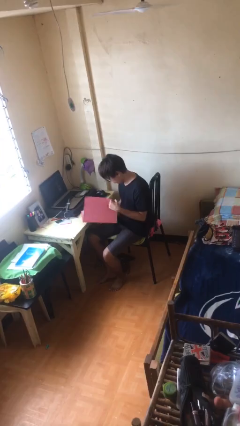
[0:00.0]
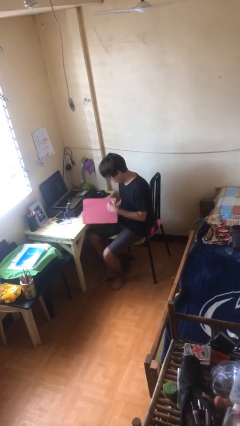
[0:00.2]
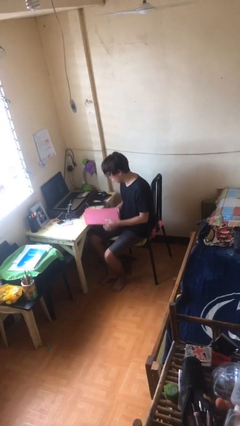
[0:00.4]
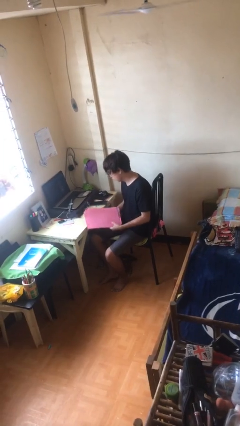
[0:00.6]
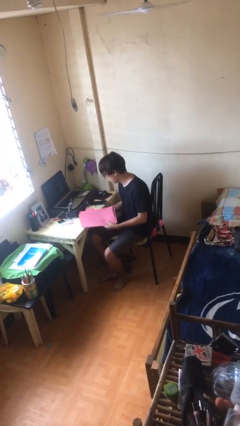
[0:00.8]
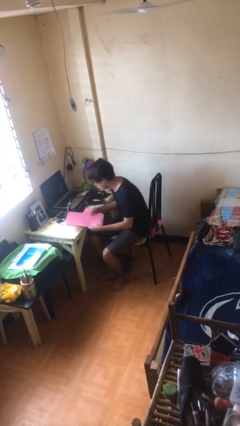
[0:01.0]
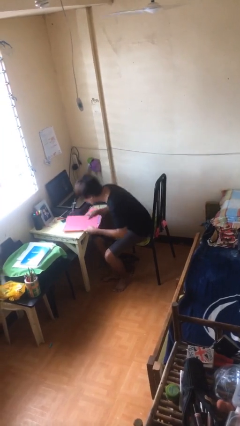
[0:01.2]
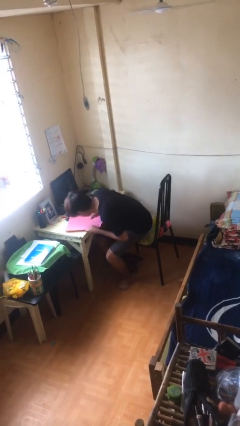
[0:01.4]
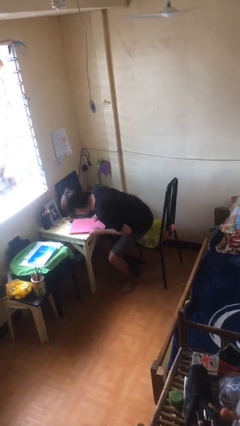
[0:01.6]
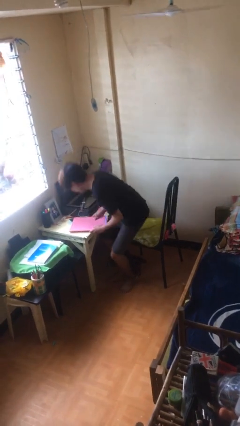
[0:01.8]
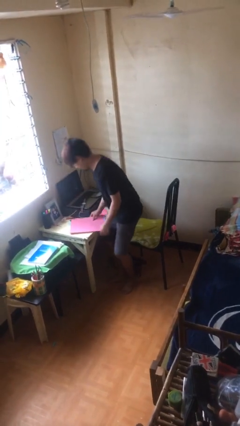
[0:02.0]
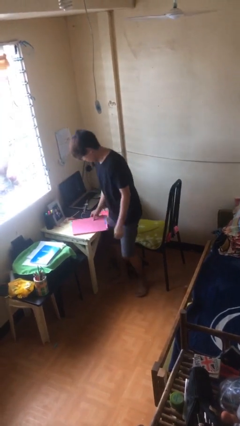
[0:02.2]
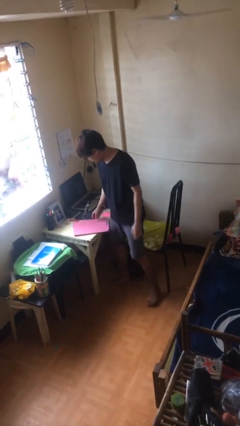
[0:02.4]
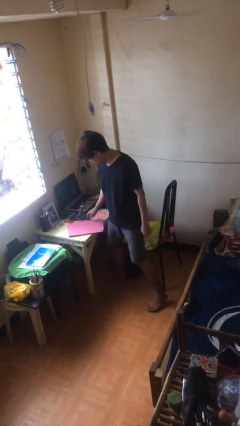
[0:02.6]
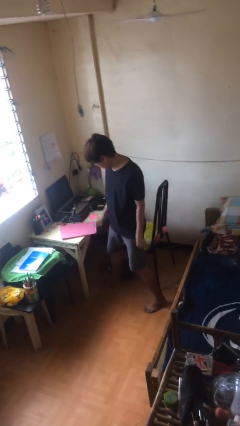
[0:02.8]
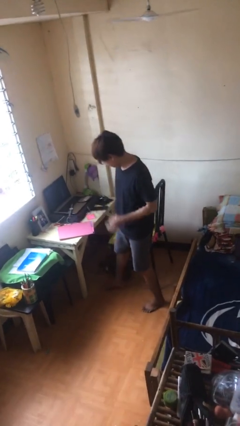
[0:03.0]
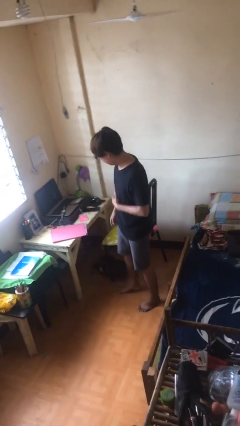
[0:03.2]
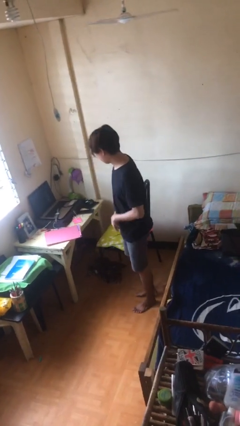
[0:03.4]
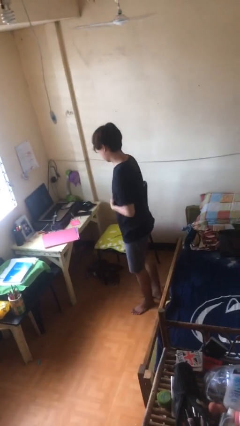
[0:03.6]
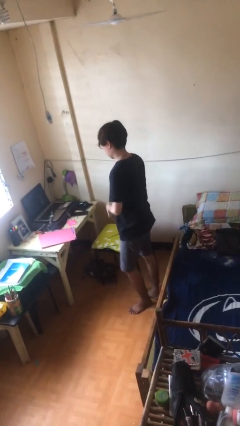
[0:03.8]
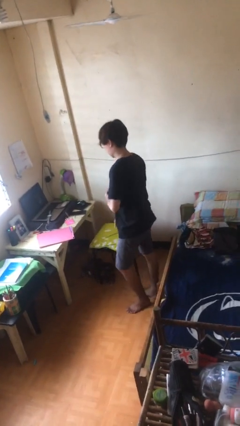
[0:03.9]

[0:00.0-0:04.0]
person stands up

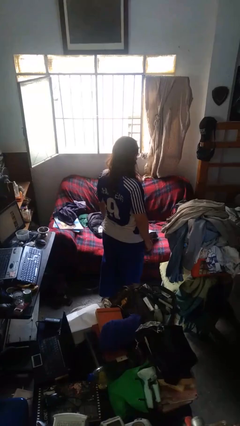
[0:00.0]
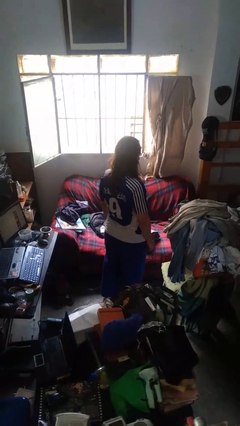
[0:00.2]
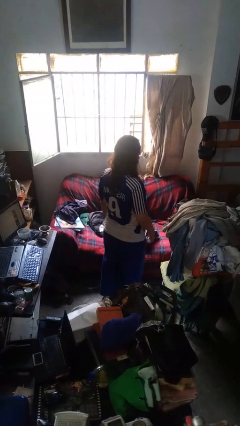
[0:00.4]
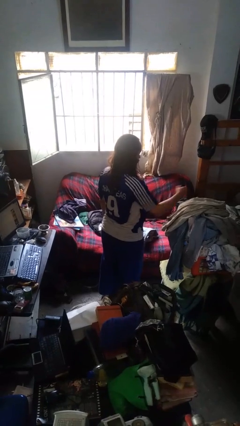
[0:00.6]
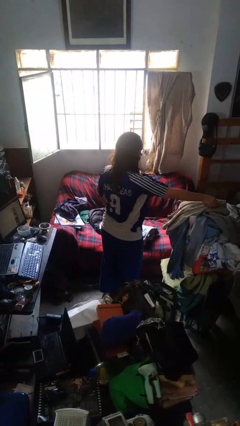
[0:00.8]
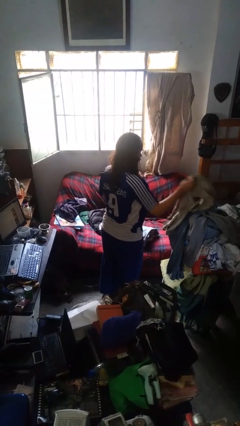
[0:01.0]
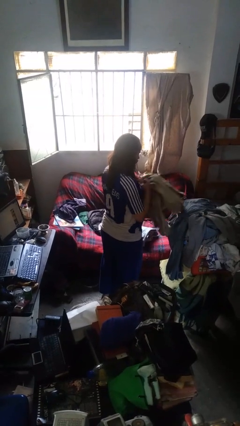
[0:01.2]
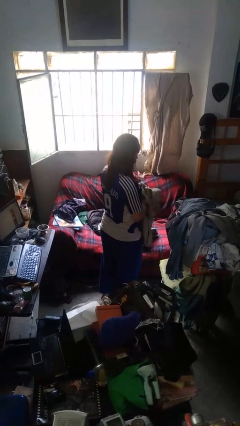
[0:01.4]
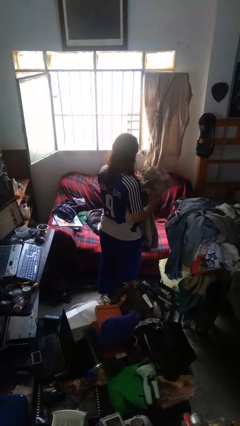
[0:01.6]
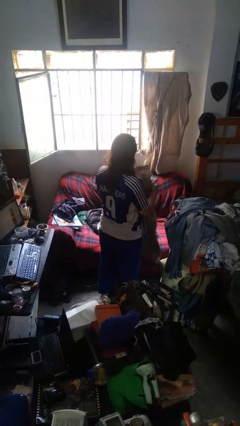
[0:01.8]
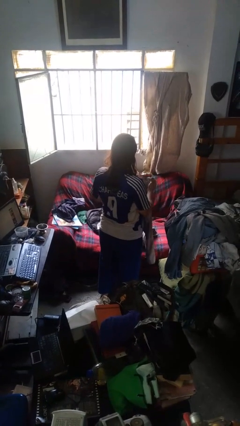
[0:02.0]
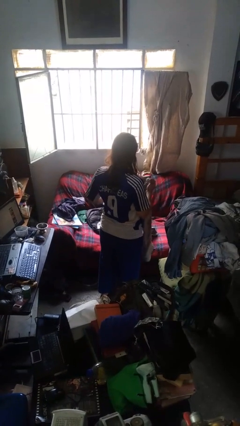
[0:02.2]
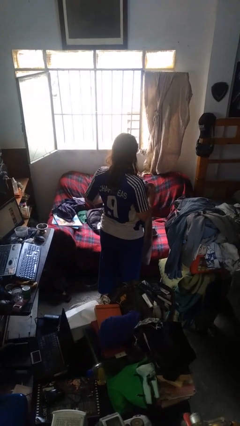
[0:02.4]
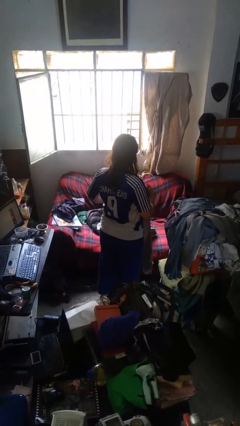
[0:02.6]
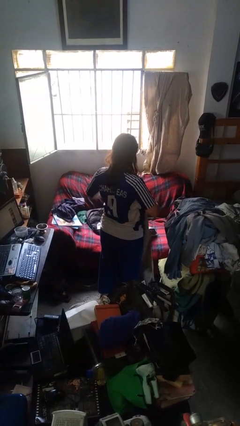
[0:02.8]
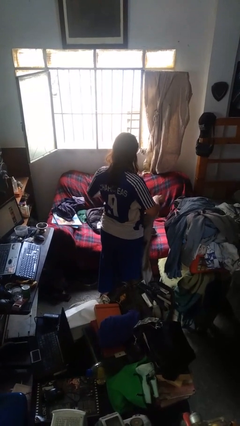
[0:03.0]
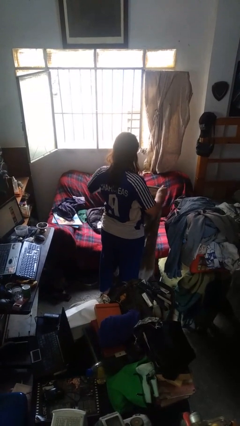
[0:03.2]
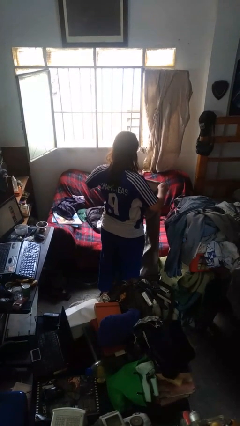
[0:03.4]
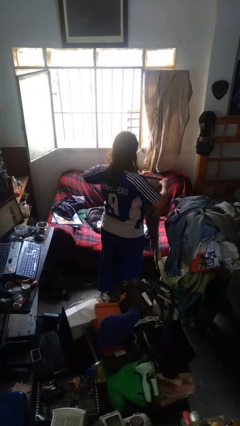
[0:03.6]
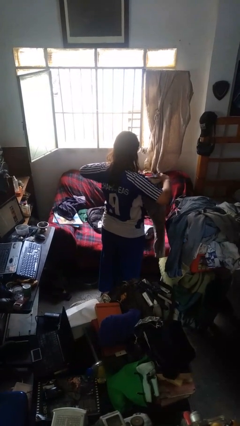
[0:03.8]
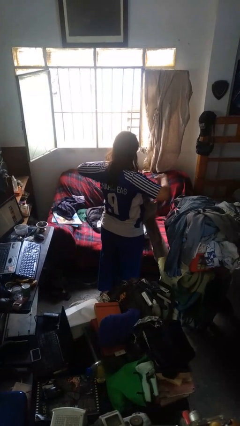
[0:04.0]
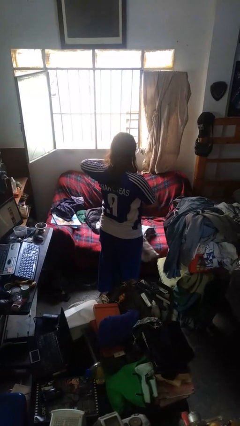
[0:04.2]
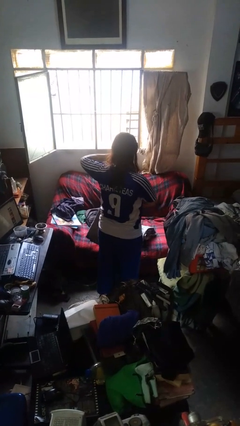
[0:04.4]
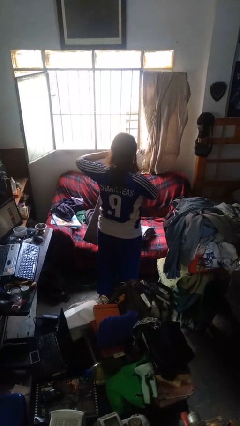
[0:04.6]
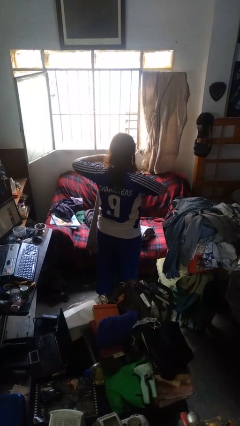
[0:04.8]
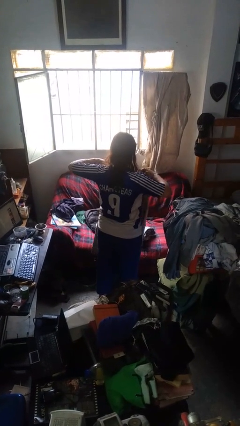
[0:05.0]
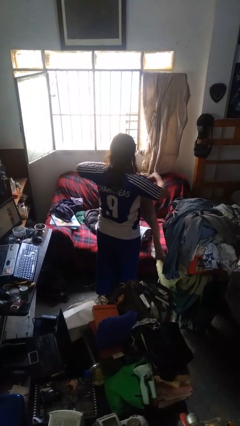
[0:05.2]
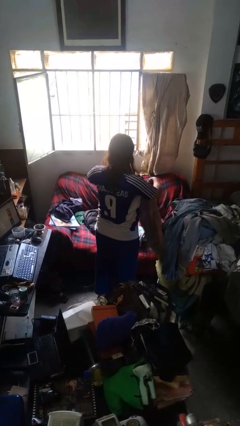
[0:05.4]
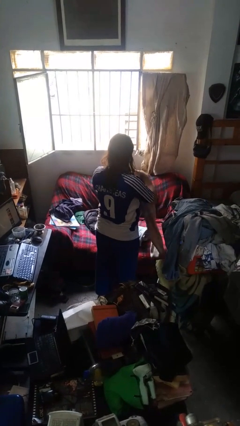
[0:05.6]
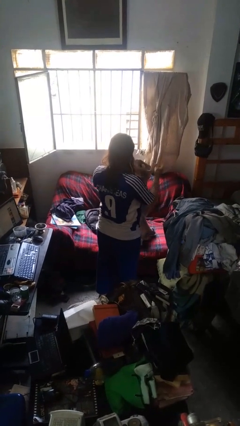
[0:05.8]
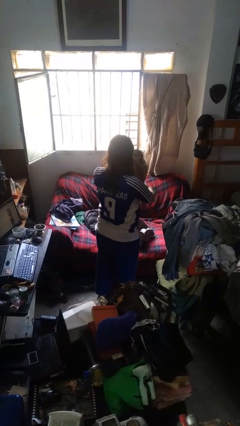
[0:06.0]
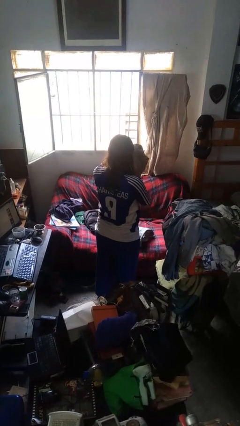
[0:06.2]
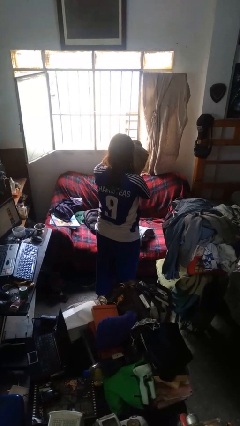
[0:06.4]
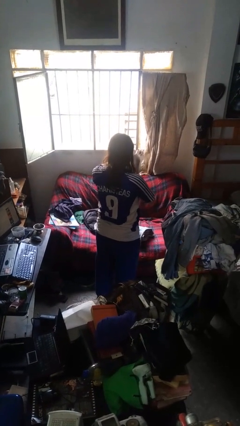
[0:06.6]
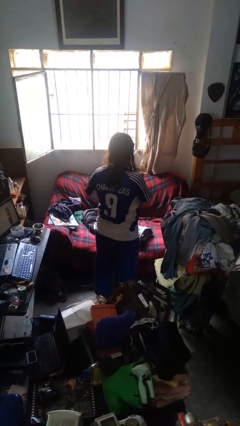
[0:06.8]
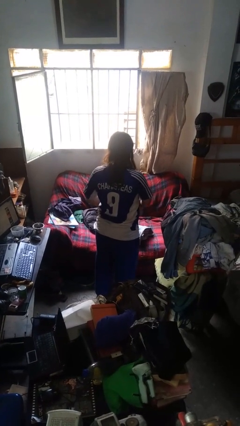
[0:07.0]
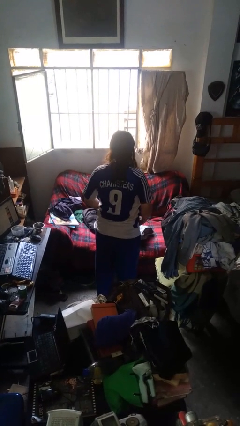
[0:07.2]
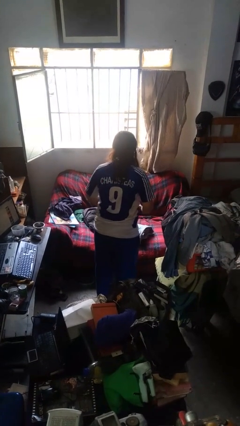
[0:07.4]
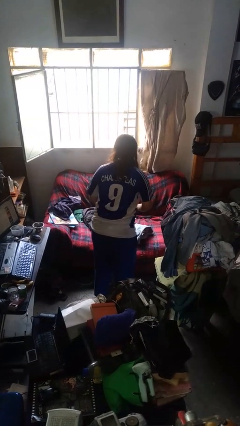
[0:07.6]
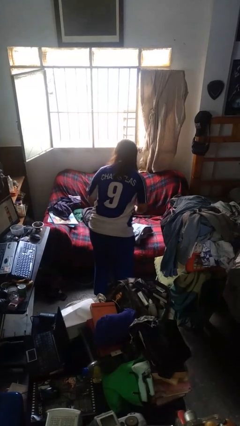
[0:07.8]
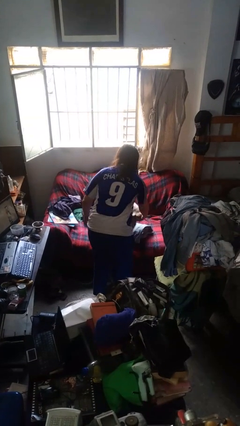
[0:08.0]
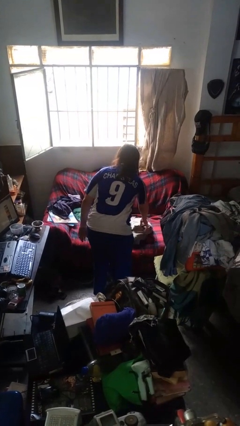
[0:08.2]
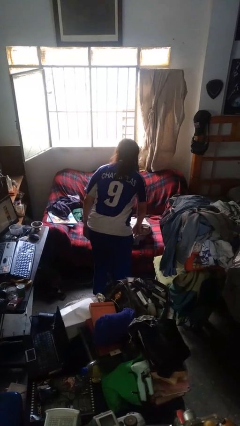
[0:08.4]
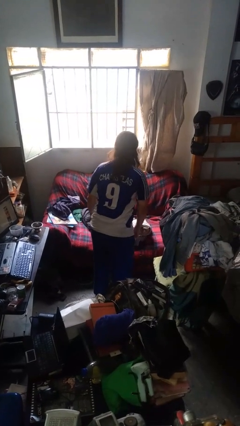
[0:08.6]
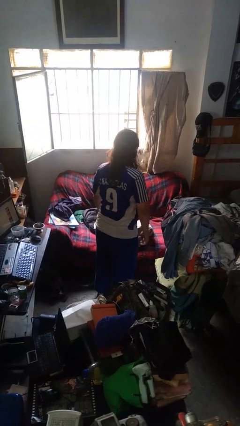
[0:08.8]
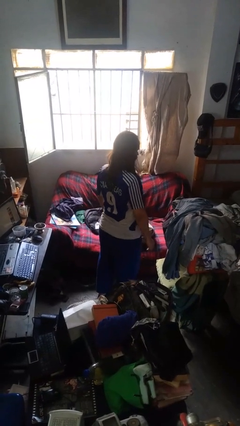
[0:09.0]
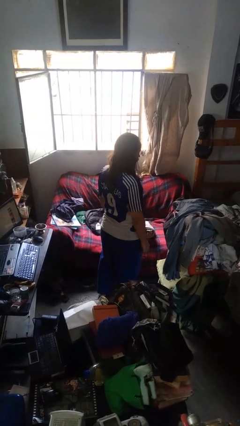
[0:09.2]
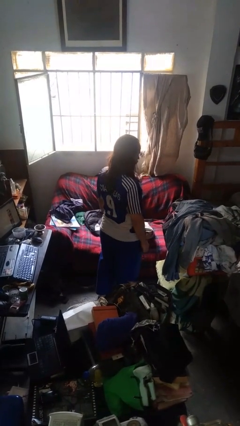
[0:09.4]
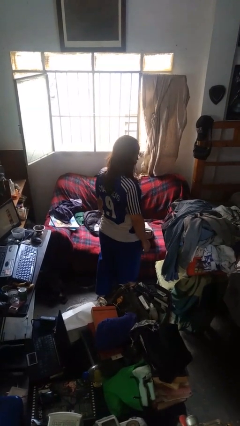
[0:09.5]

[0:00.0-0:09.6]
person folds pants

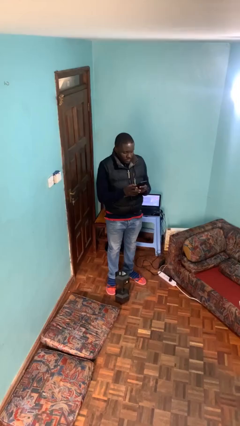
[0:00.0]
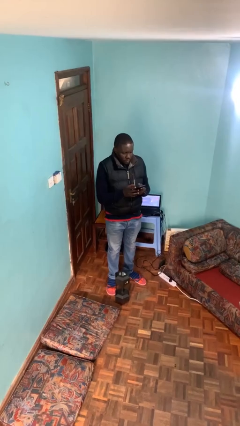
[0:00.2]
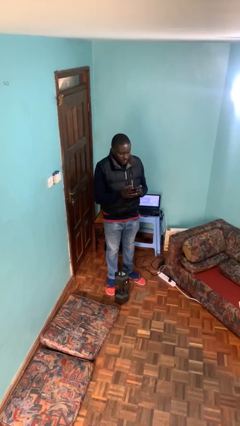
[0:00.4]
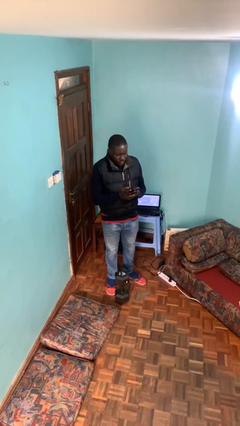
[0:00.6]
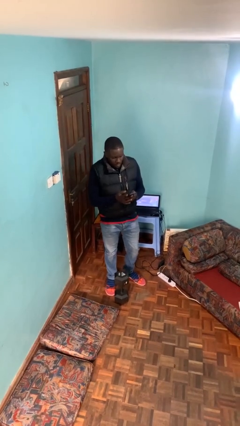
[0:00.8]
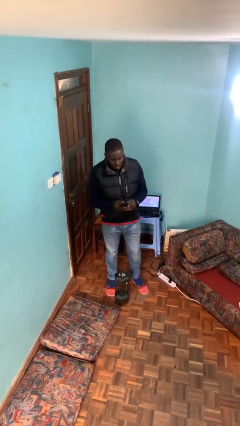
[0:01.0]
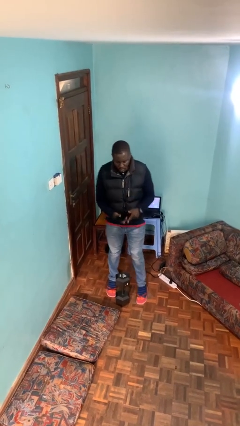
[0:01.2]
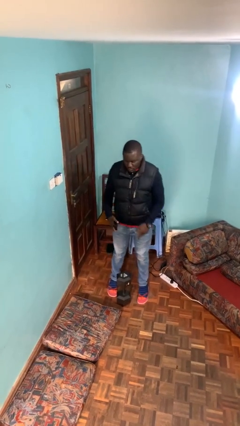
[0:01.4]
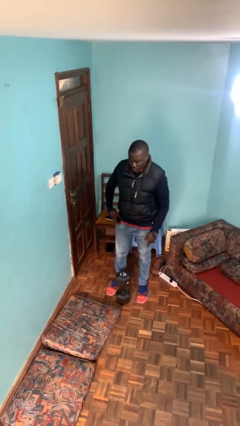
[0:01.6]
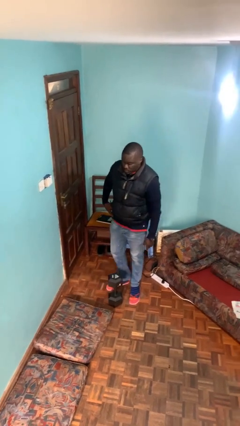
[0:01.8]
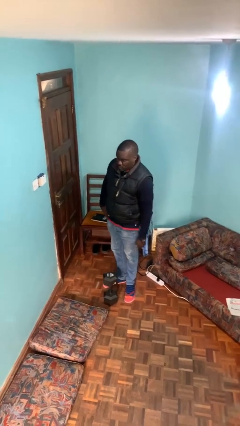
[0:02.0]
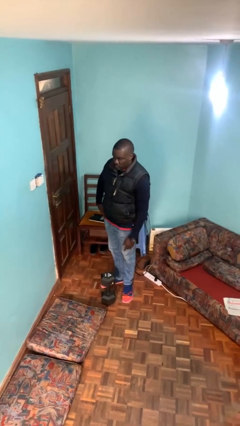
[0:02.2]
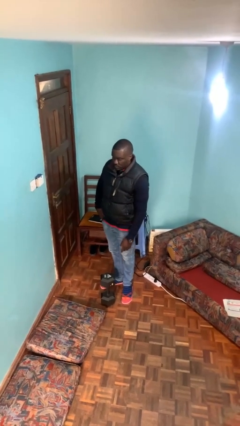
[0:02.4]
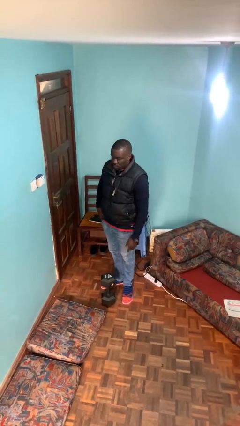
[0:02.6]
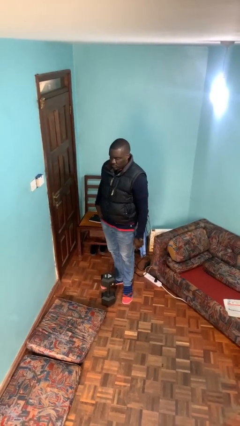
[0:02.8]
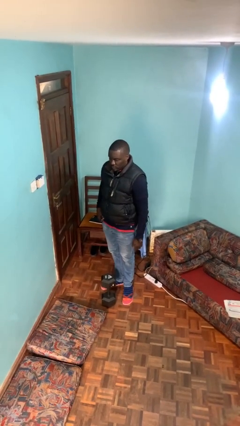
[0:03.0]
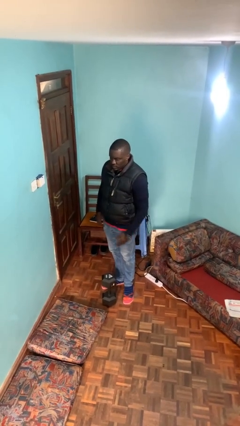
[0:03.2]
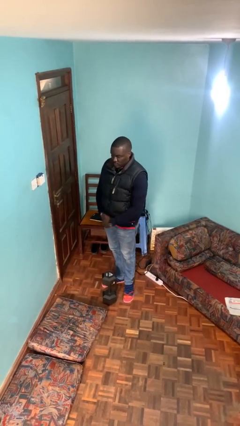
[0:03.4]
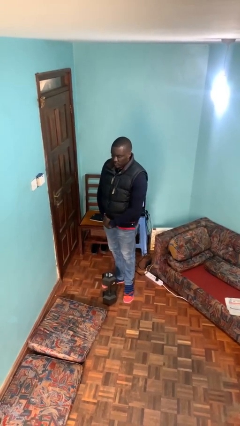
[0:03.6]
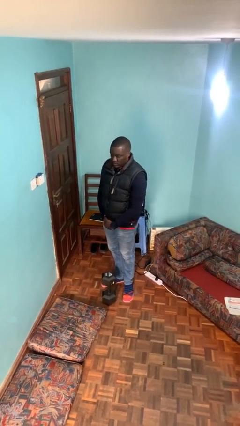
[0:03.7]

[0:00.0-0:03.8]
person puts phone into pocket

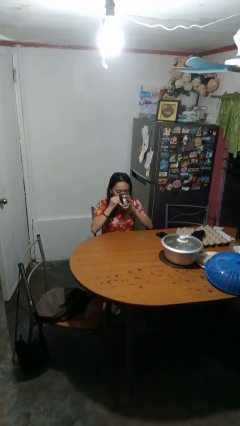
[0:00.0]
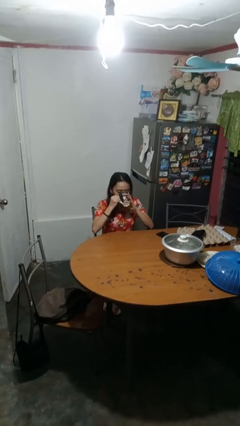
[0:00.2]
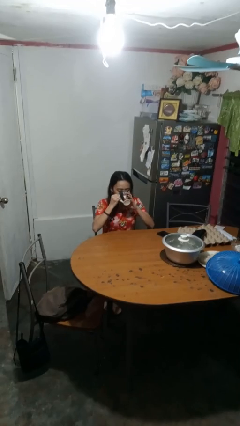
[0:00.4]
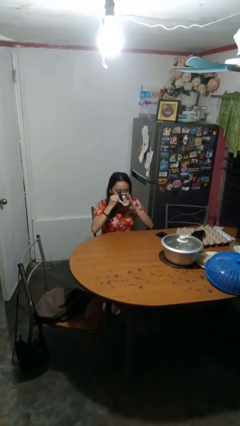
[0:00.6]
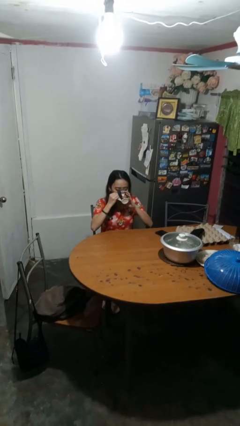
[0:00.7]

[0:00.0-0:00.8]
person drinks from mug
